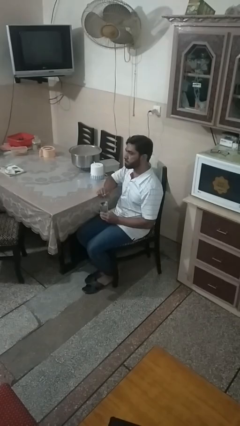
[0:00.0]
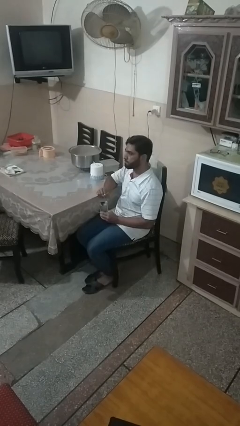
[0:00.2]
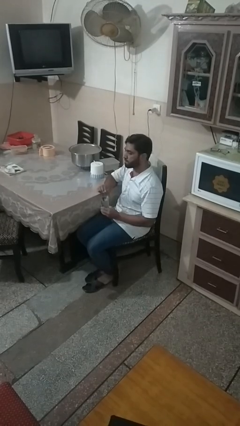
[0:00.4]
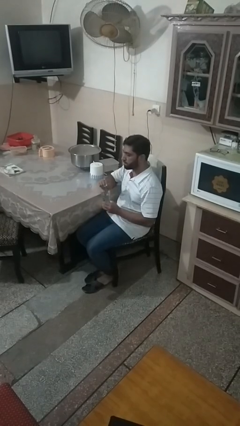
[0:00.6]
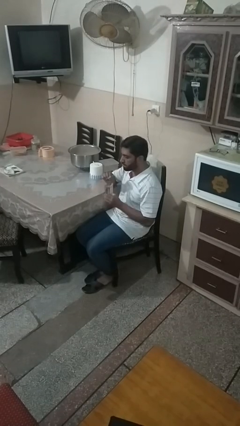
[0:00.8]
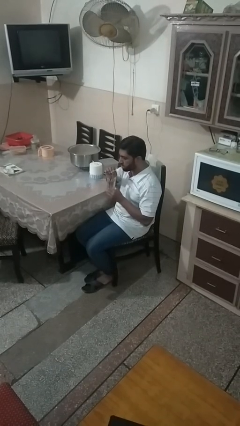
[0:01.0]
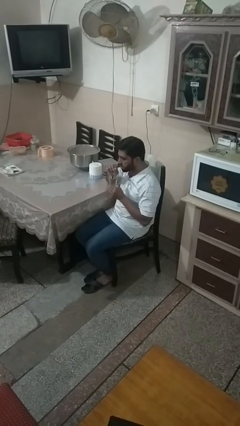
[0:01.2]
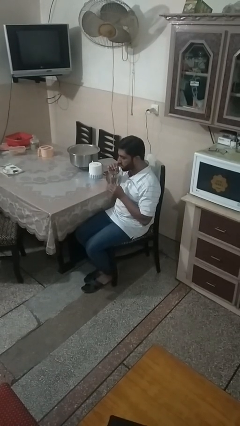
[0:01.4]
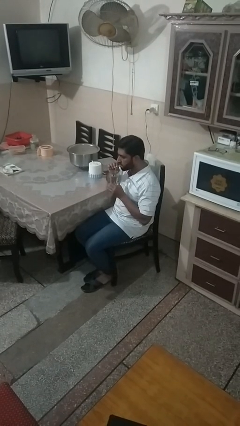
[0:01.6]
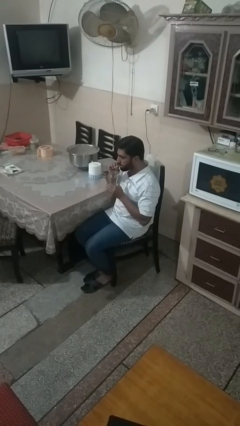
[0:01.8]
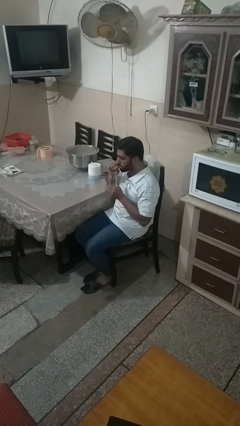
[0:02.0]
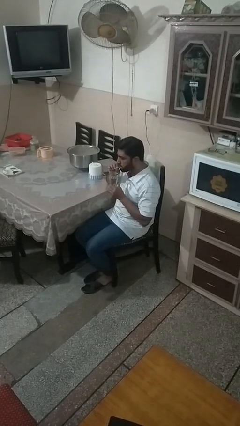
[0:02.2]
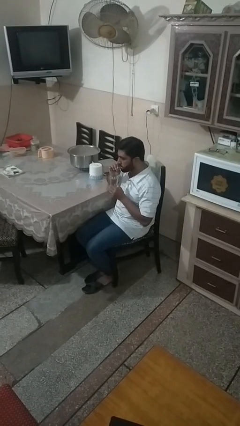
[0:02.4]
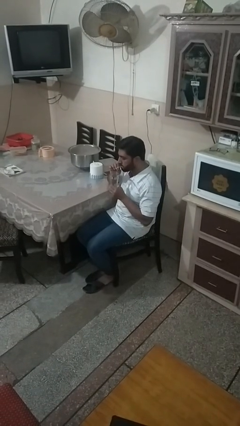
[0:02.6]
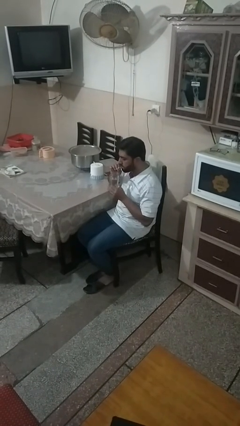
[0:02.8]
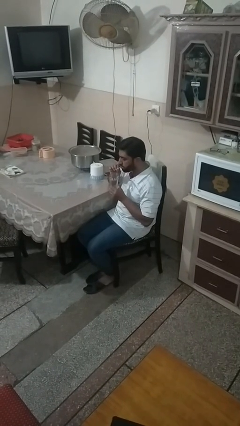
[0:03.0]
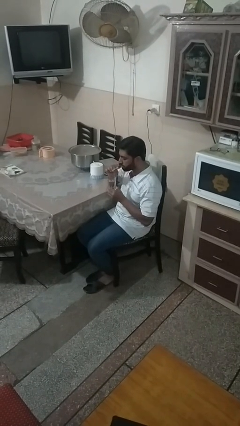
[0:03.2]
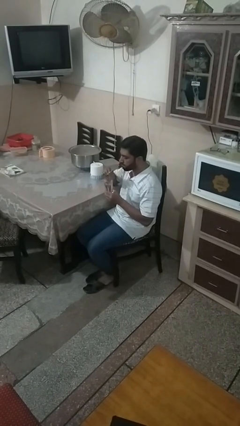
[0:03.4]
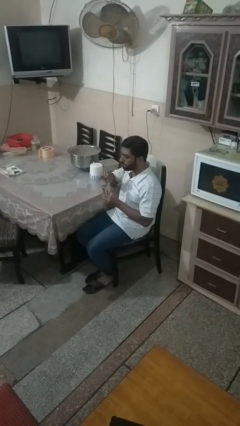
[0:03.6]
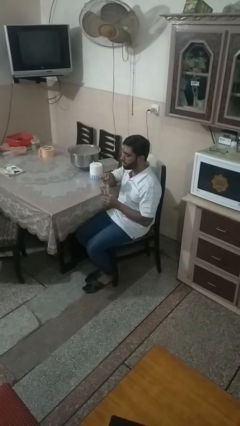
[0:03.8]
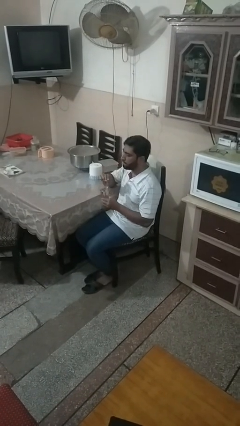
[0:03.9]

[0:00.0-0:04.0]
person drinks from straw

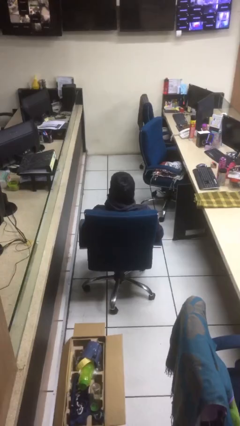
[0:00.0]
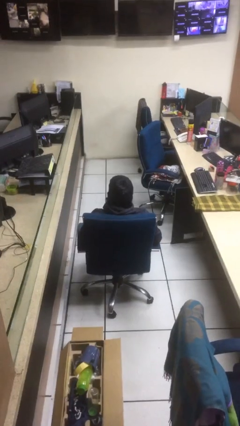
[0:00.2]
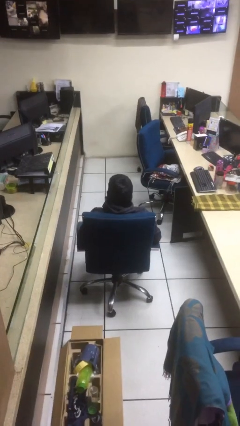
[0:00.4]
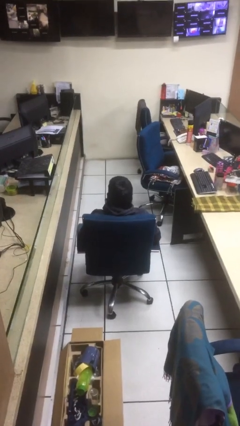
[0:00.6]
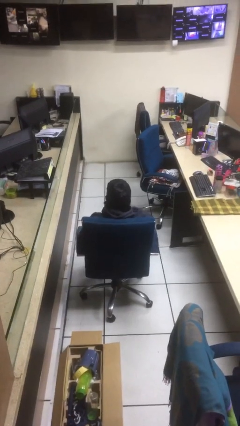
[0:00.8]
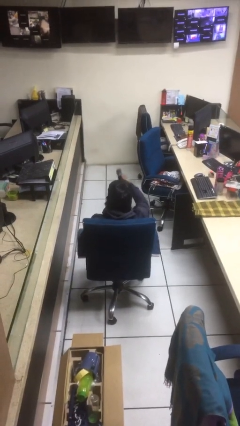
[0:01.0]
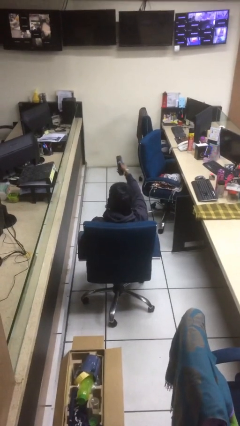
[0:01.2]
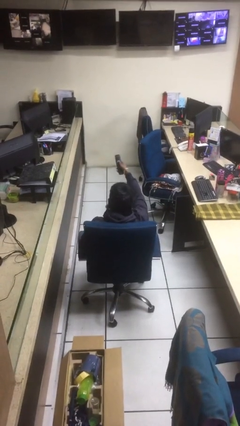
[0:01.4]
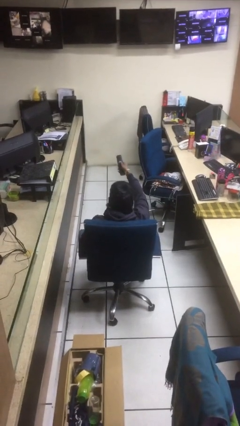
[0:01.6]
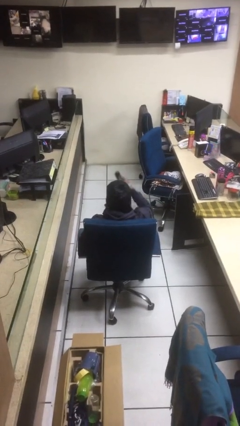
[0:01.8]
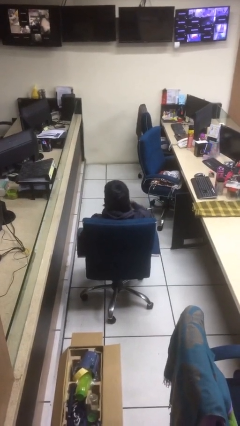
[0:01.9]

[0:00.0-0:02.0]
person uses television remote

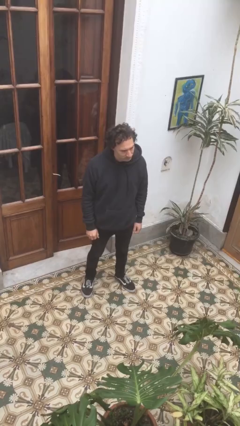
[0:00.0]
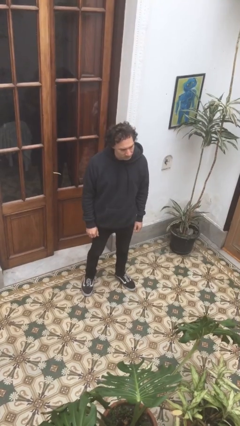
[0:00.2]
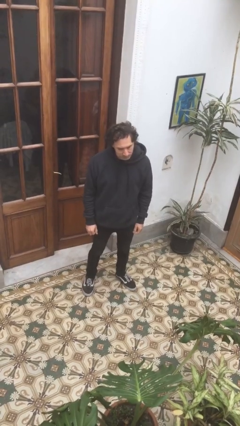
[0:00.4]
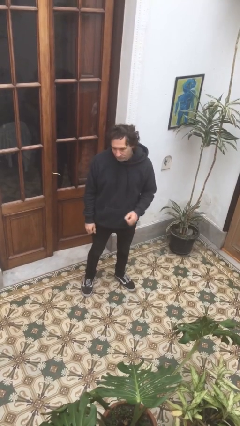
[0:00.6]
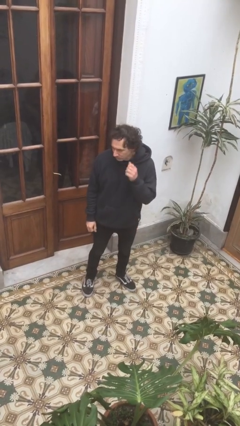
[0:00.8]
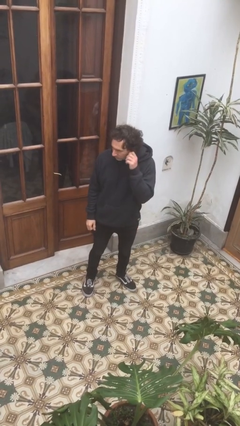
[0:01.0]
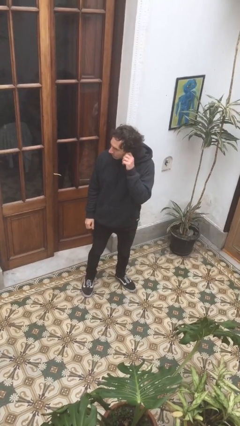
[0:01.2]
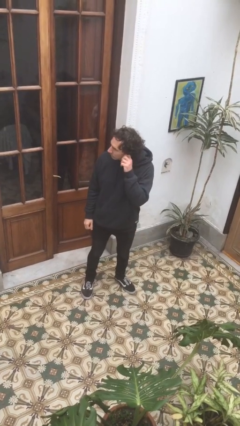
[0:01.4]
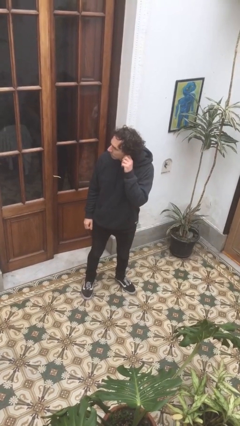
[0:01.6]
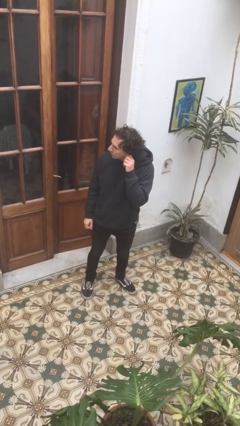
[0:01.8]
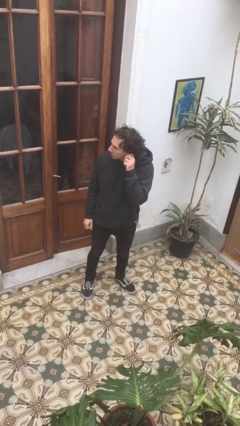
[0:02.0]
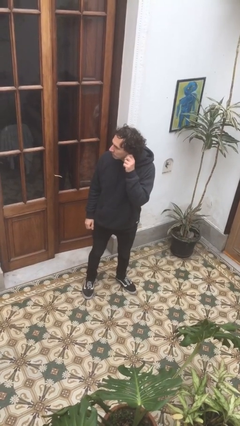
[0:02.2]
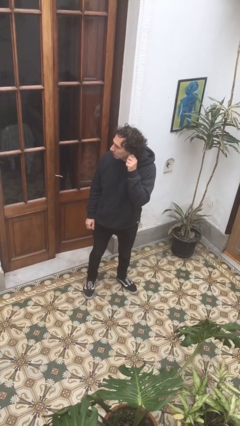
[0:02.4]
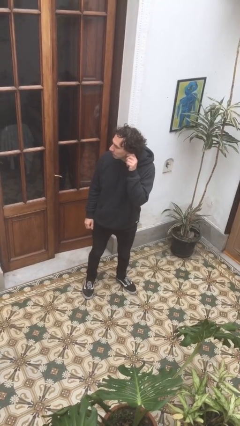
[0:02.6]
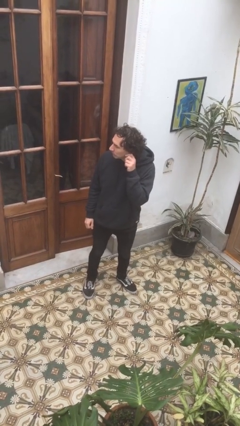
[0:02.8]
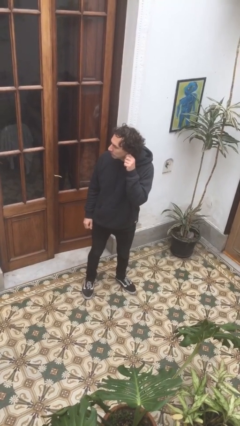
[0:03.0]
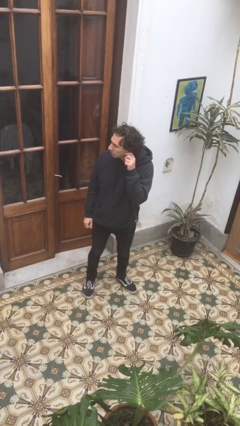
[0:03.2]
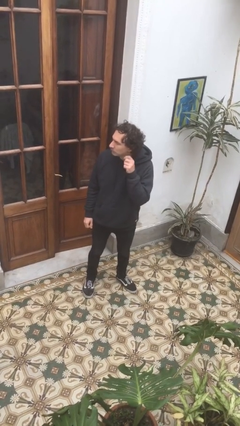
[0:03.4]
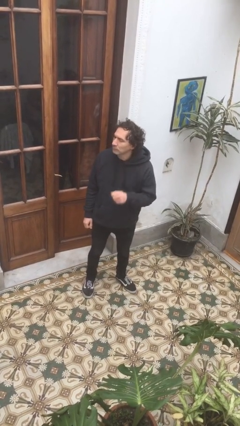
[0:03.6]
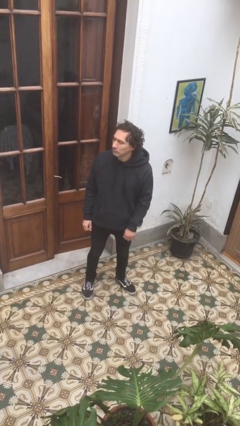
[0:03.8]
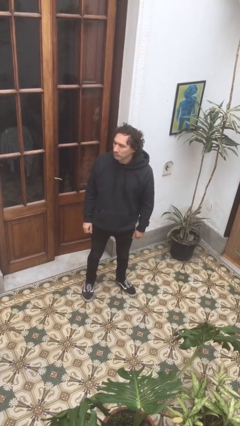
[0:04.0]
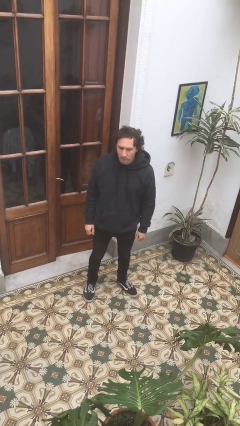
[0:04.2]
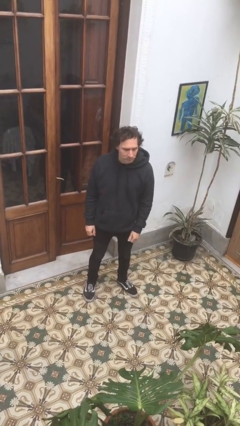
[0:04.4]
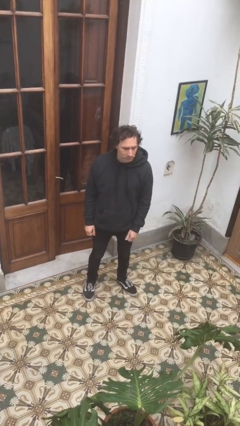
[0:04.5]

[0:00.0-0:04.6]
person touches earlobe

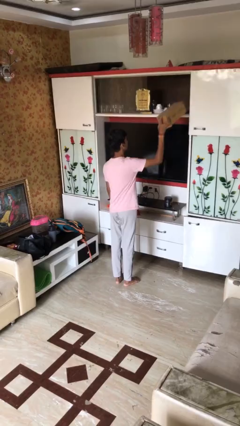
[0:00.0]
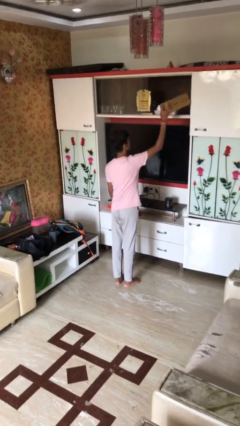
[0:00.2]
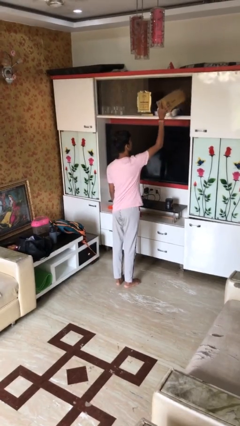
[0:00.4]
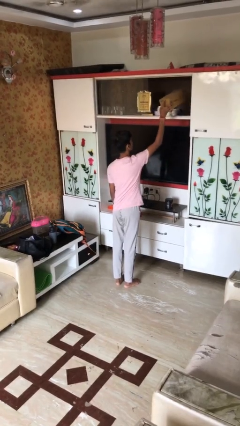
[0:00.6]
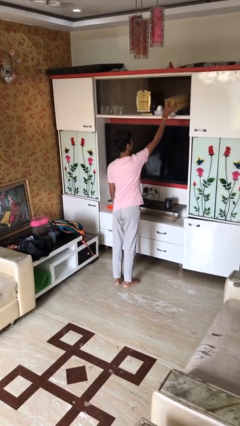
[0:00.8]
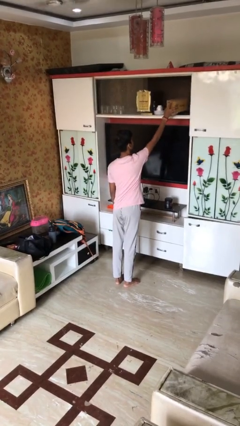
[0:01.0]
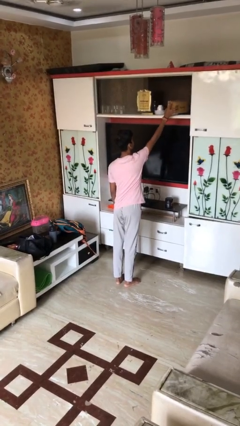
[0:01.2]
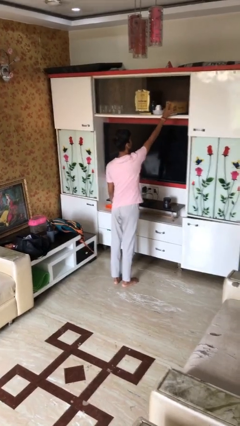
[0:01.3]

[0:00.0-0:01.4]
person puts down object on shelf

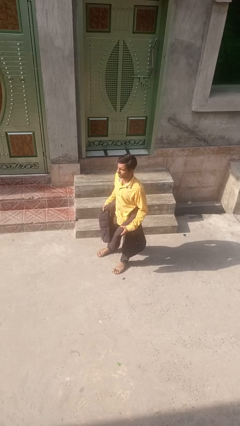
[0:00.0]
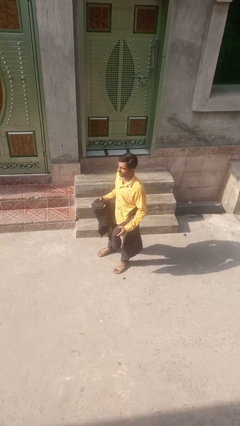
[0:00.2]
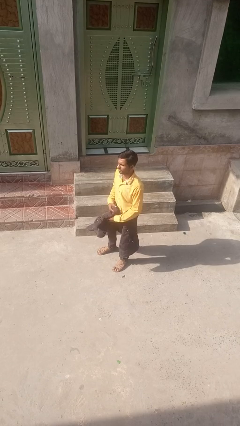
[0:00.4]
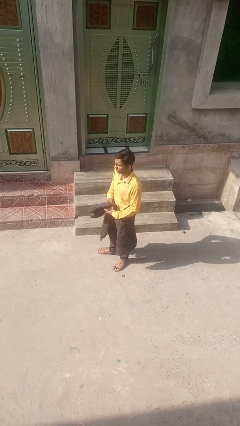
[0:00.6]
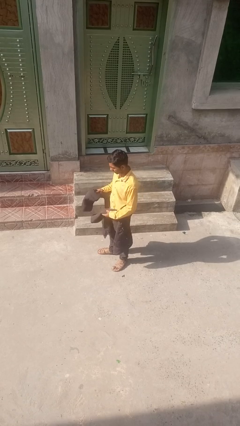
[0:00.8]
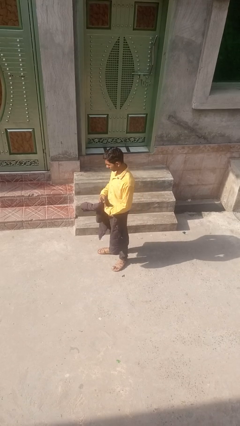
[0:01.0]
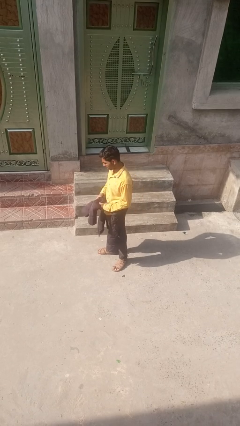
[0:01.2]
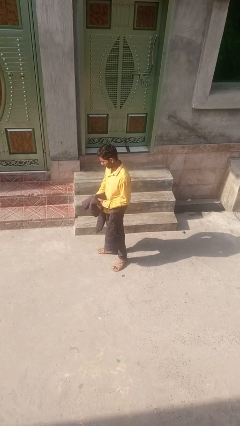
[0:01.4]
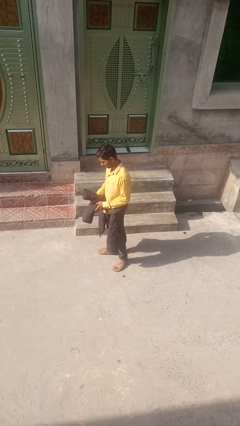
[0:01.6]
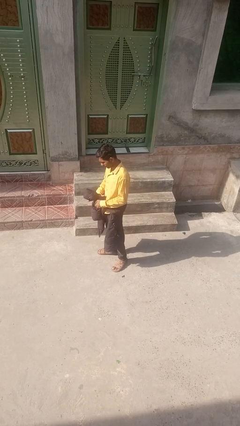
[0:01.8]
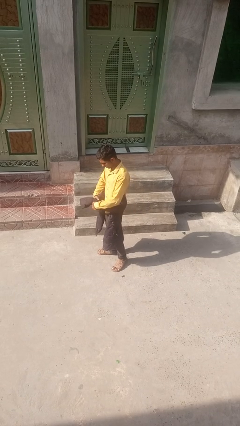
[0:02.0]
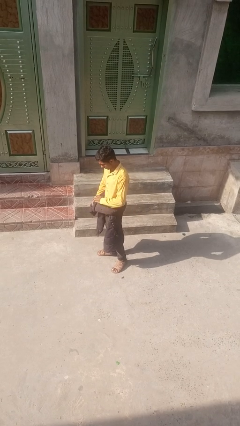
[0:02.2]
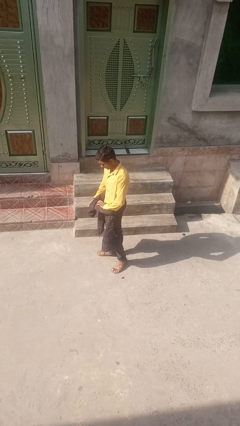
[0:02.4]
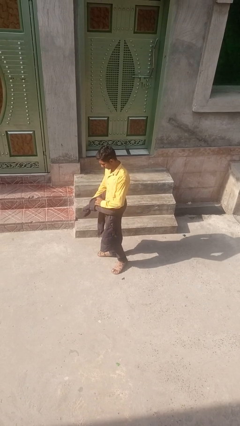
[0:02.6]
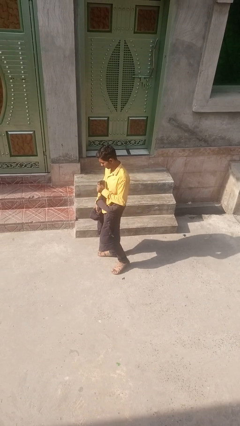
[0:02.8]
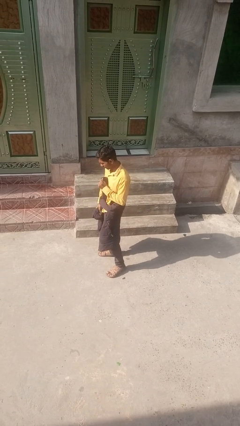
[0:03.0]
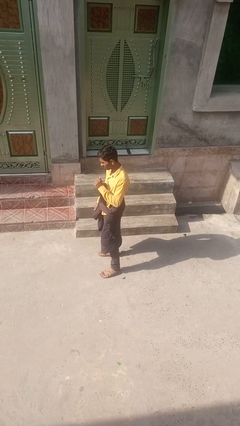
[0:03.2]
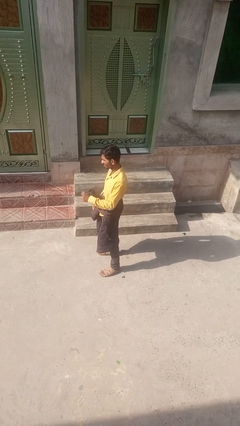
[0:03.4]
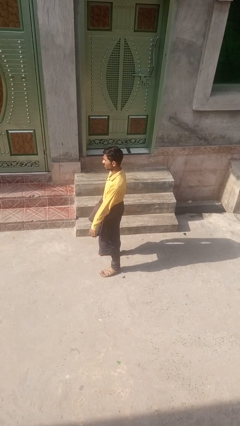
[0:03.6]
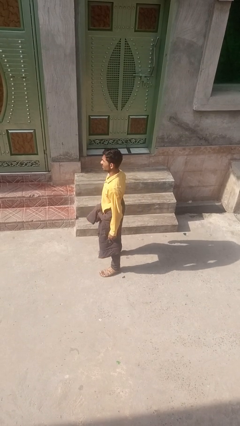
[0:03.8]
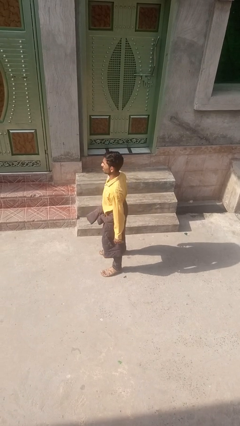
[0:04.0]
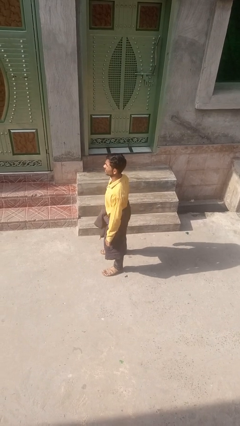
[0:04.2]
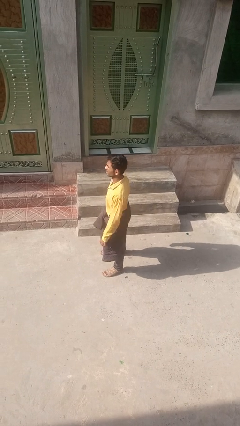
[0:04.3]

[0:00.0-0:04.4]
person ties jacket around waist

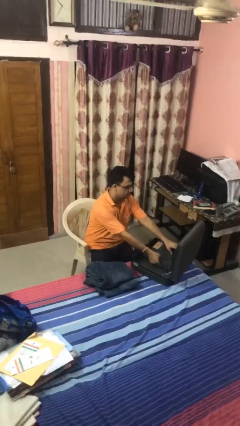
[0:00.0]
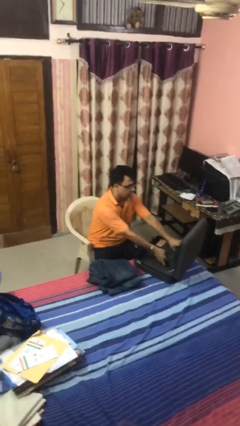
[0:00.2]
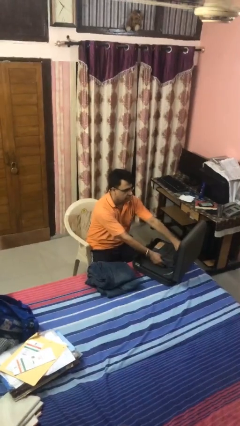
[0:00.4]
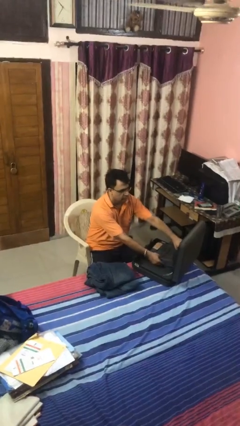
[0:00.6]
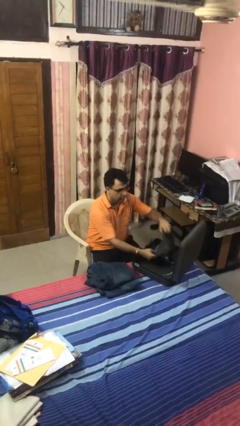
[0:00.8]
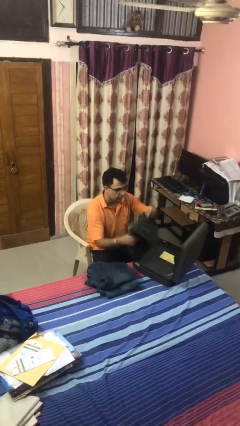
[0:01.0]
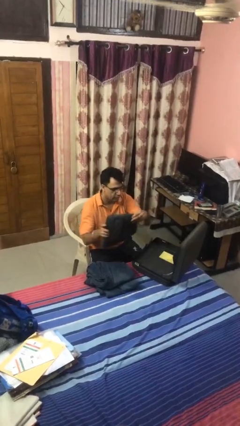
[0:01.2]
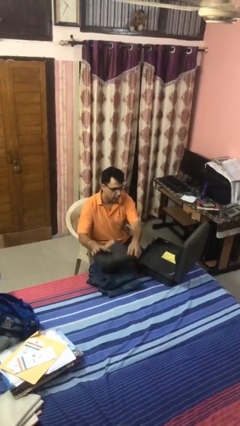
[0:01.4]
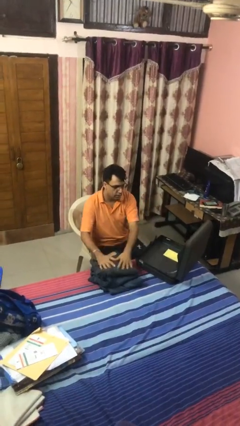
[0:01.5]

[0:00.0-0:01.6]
person unloads clothes from suitcase
